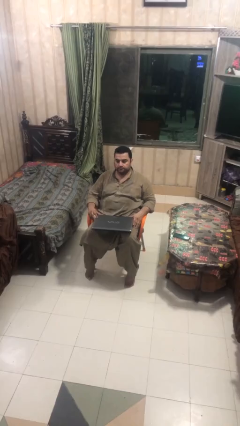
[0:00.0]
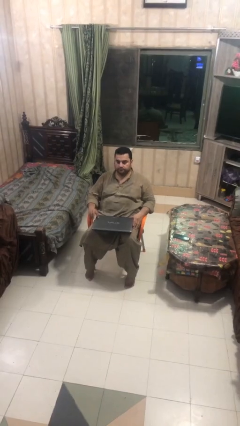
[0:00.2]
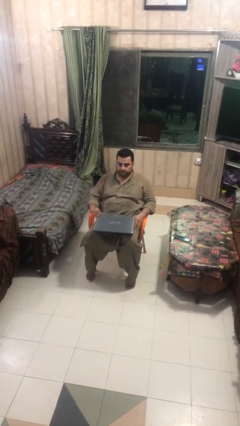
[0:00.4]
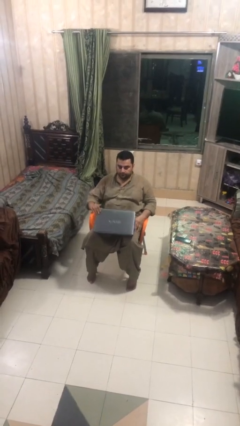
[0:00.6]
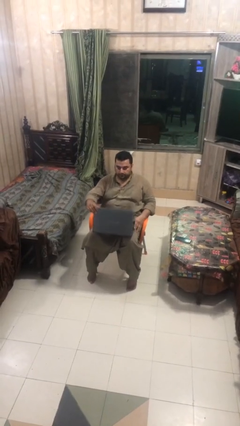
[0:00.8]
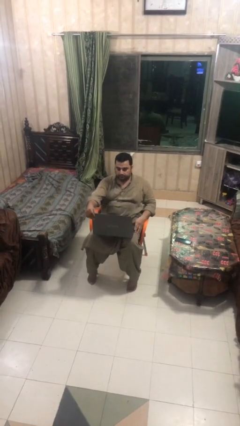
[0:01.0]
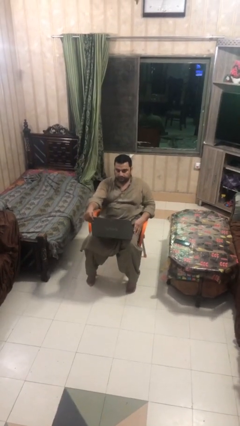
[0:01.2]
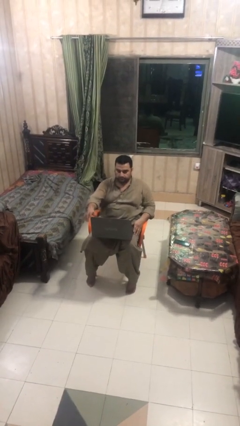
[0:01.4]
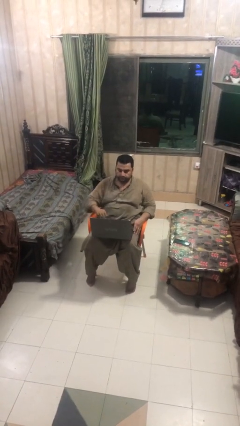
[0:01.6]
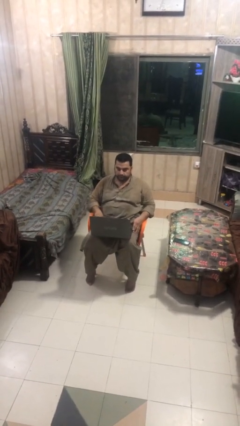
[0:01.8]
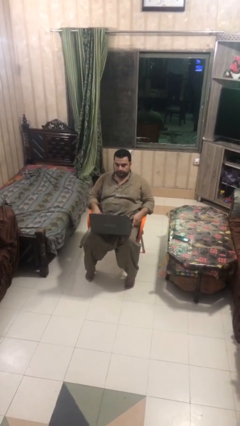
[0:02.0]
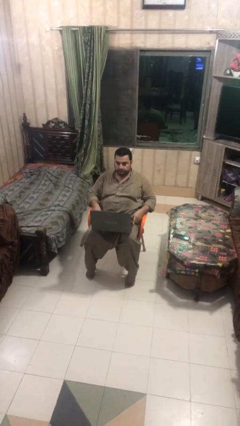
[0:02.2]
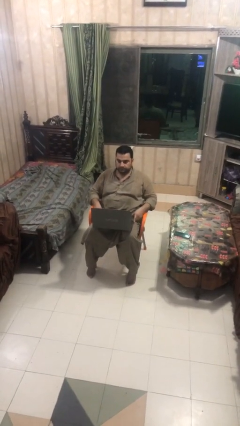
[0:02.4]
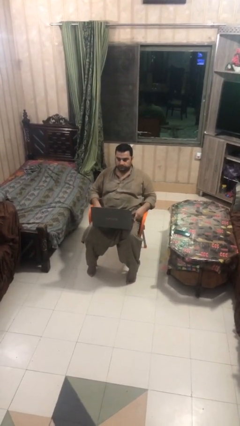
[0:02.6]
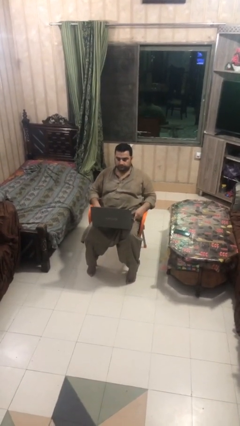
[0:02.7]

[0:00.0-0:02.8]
person opens laptop

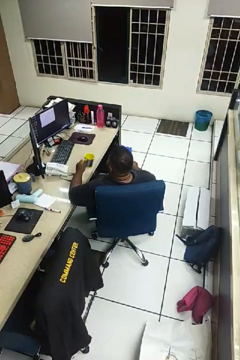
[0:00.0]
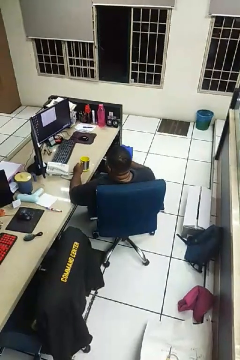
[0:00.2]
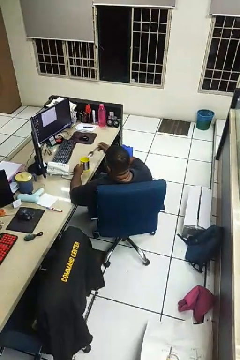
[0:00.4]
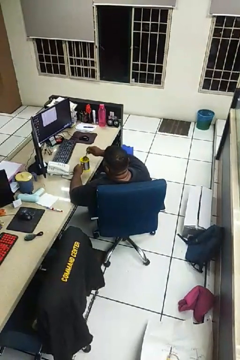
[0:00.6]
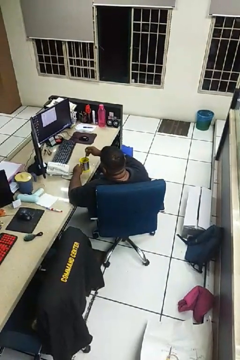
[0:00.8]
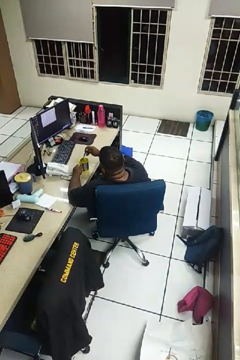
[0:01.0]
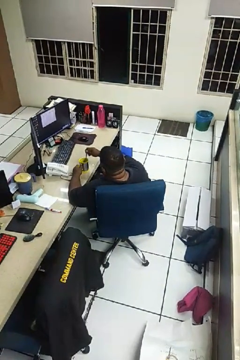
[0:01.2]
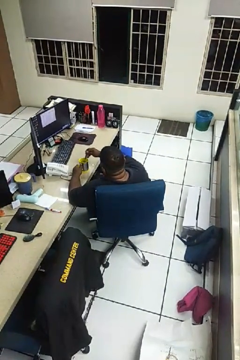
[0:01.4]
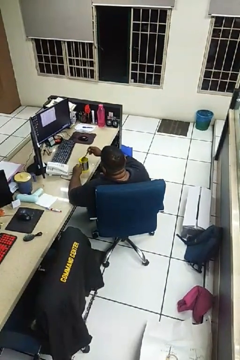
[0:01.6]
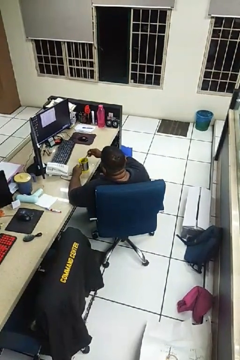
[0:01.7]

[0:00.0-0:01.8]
person stirs mug

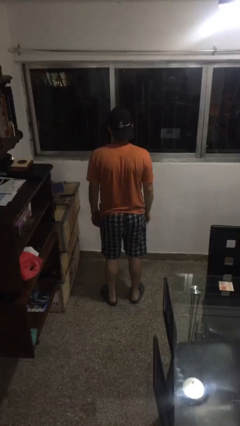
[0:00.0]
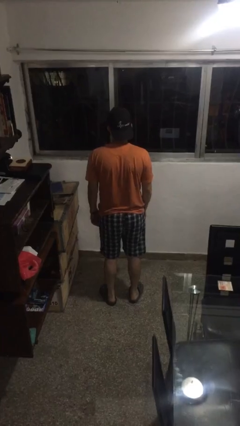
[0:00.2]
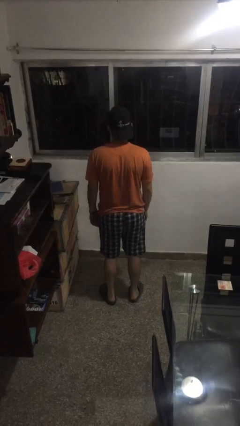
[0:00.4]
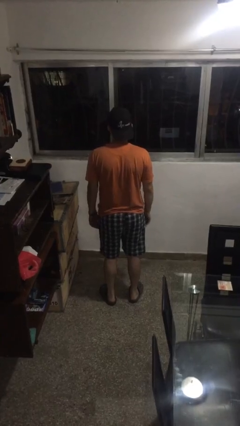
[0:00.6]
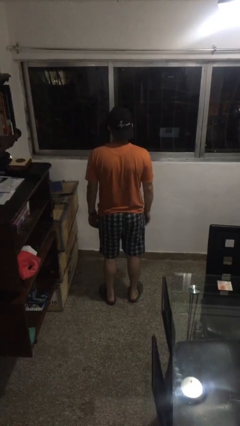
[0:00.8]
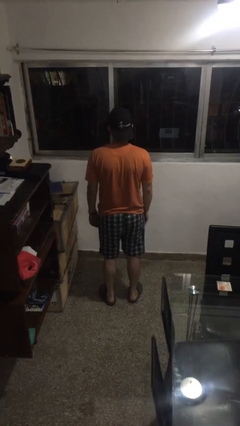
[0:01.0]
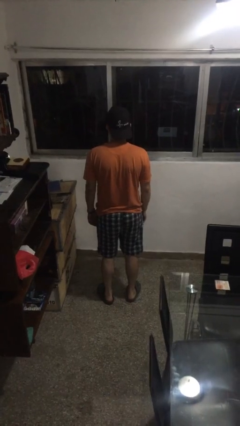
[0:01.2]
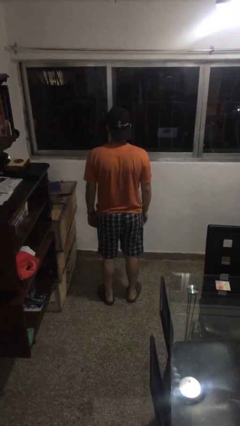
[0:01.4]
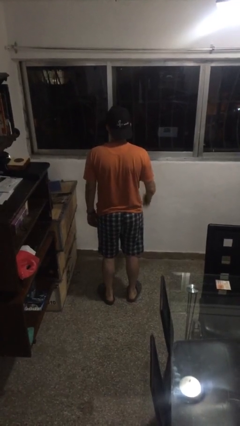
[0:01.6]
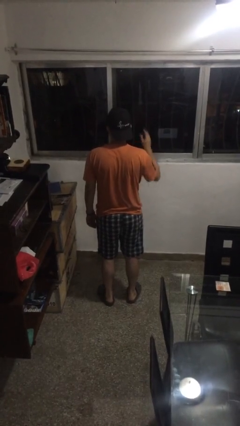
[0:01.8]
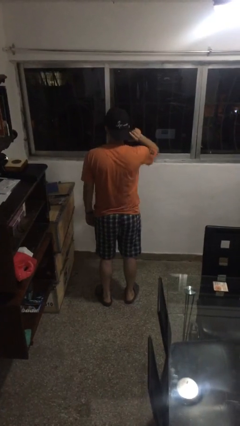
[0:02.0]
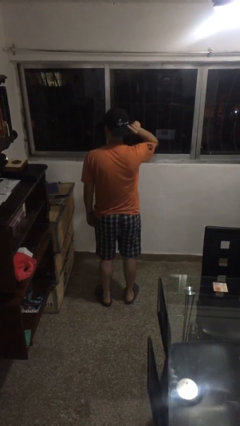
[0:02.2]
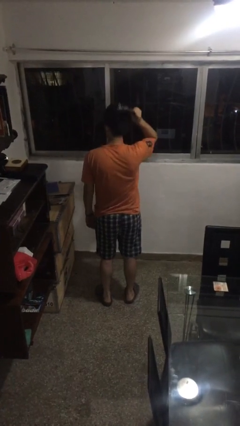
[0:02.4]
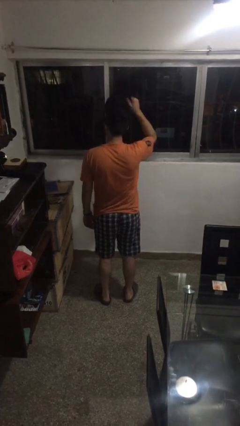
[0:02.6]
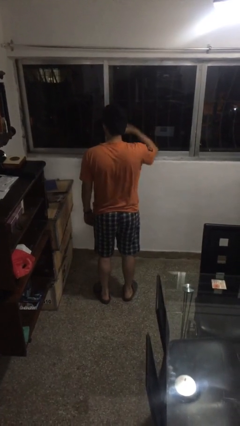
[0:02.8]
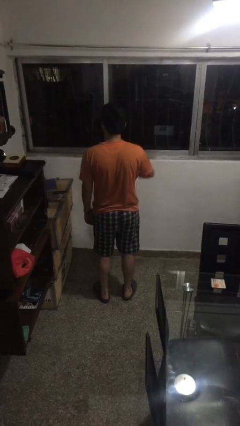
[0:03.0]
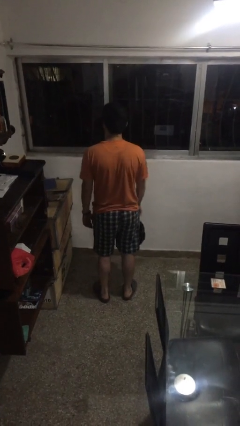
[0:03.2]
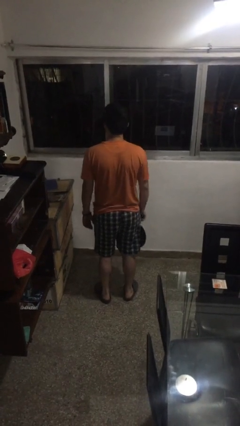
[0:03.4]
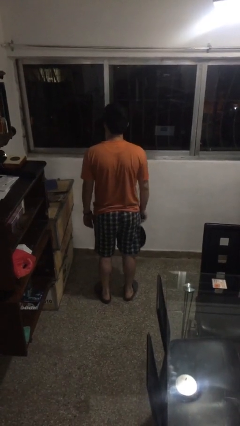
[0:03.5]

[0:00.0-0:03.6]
person takes off hat

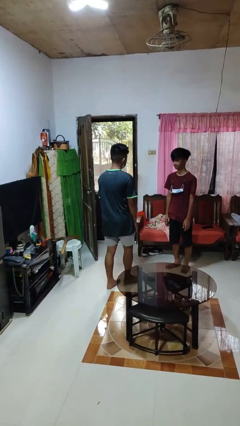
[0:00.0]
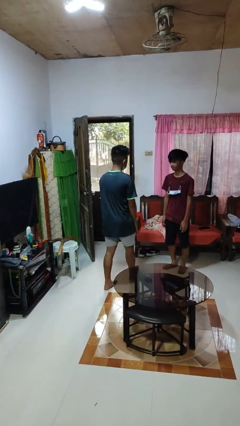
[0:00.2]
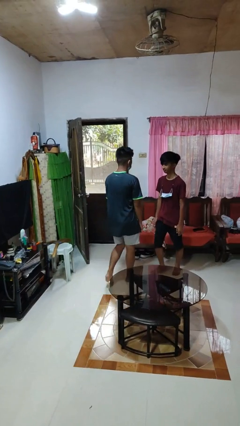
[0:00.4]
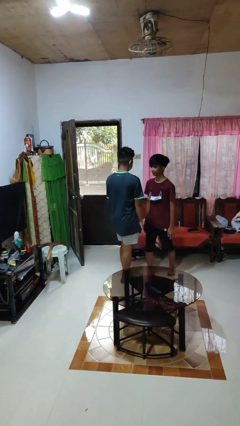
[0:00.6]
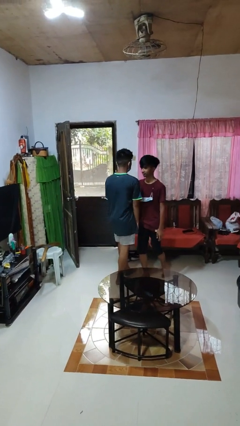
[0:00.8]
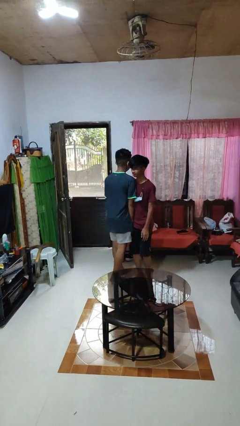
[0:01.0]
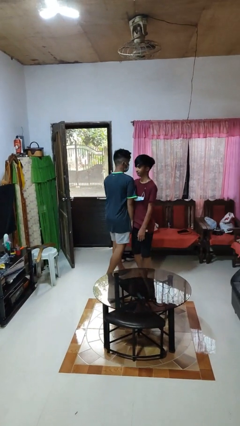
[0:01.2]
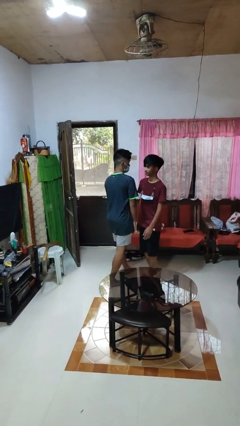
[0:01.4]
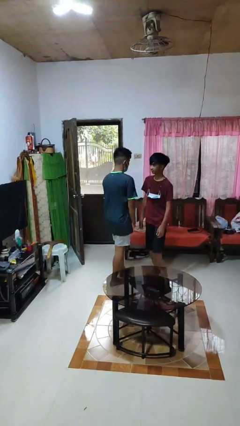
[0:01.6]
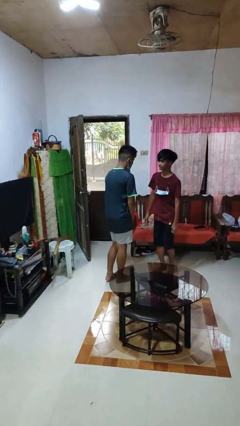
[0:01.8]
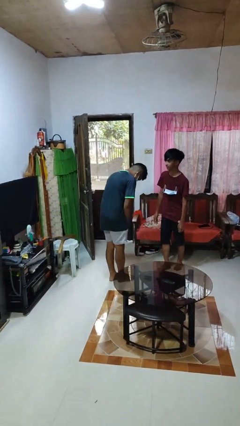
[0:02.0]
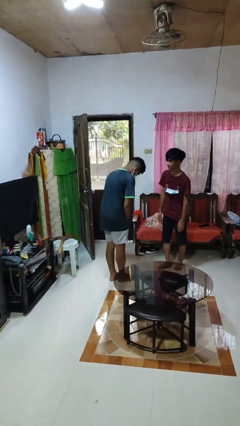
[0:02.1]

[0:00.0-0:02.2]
person bumps into person

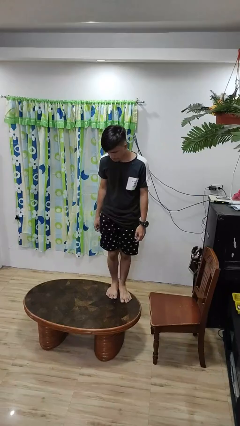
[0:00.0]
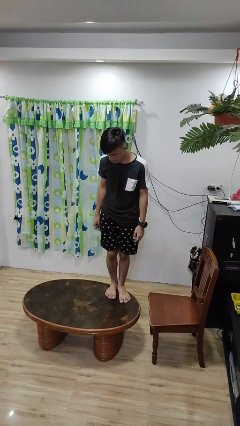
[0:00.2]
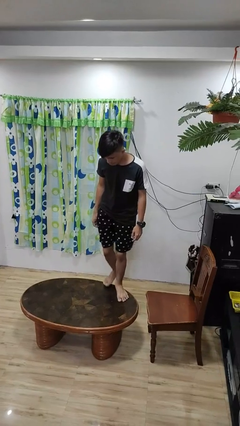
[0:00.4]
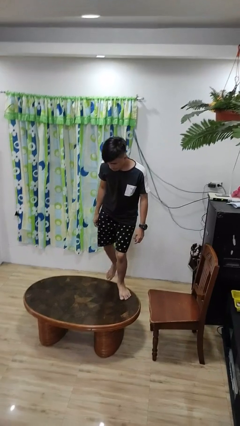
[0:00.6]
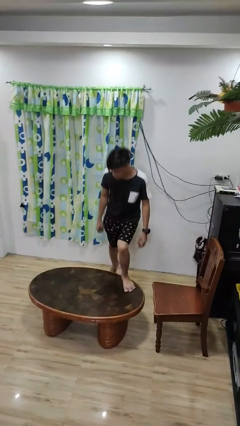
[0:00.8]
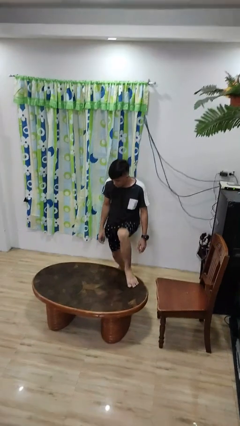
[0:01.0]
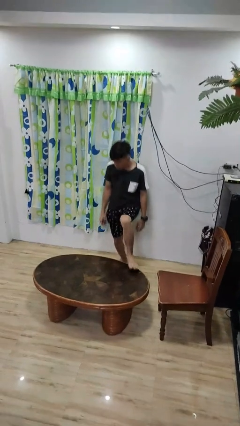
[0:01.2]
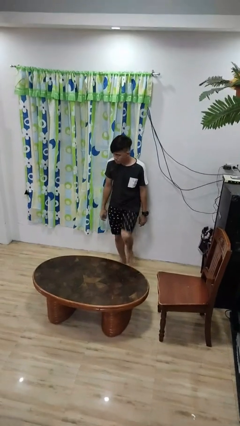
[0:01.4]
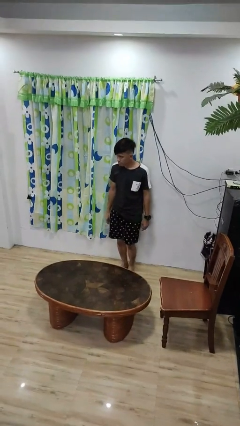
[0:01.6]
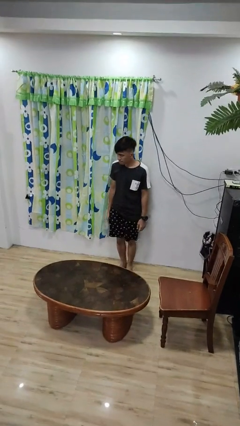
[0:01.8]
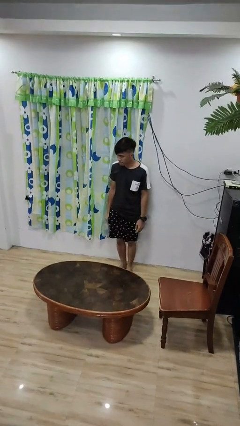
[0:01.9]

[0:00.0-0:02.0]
person climbs off table

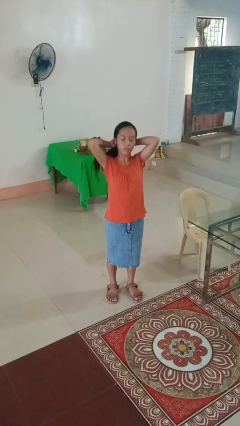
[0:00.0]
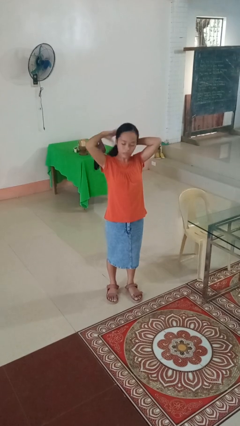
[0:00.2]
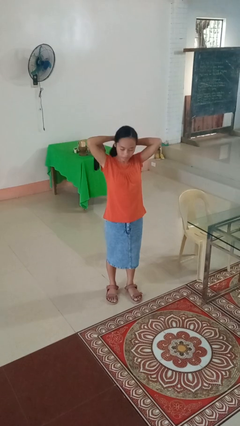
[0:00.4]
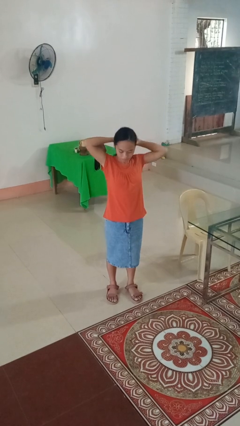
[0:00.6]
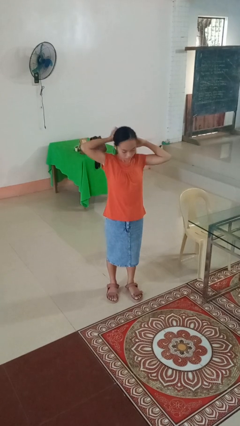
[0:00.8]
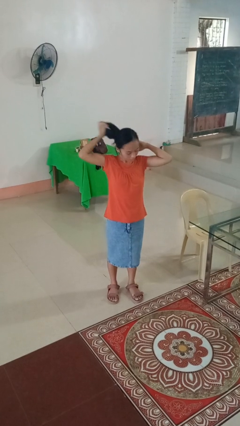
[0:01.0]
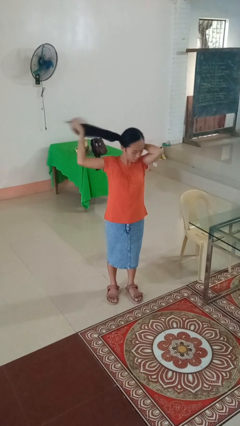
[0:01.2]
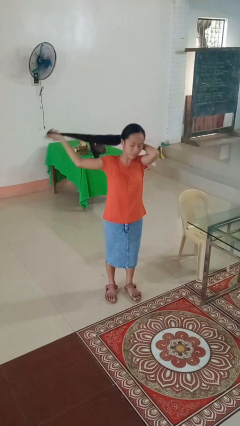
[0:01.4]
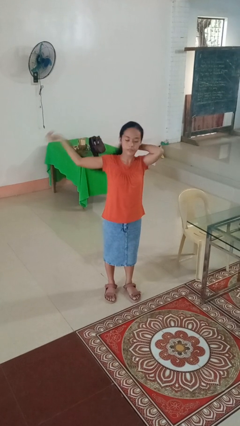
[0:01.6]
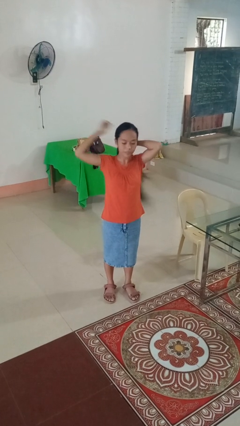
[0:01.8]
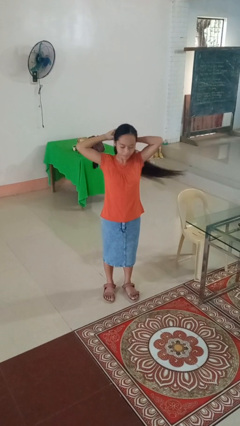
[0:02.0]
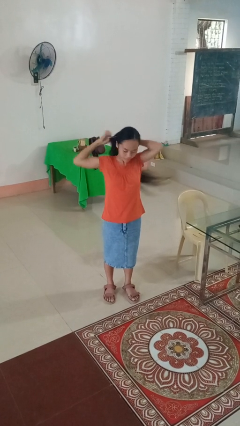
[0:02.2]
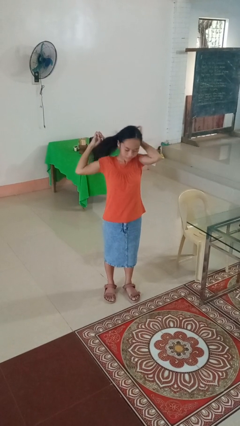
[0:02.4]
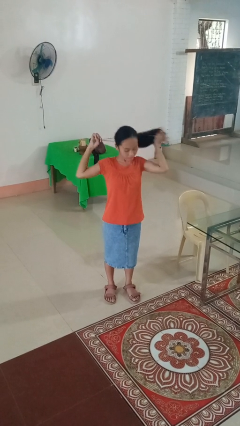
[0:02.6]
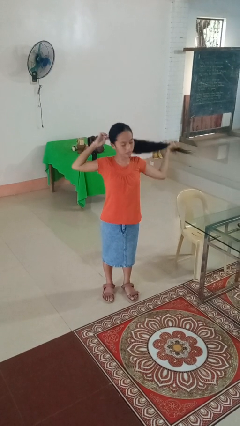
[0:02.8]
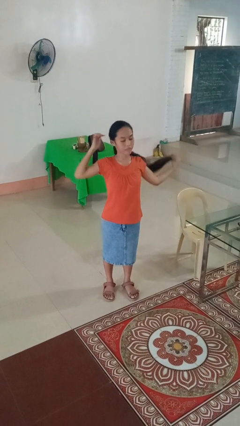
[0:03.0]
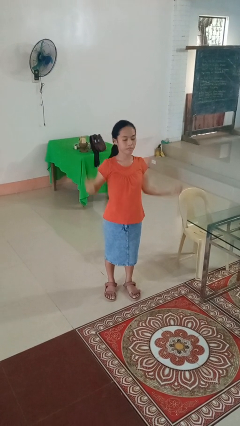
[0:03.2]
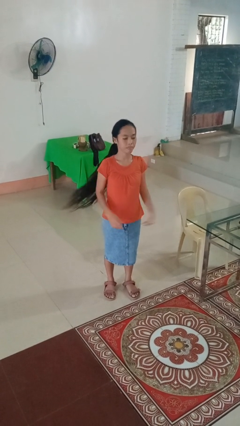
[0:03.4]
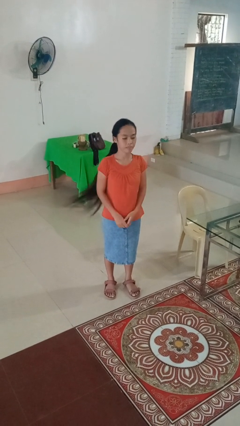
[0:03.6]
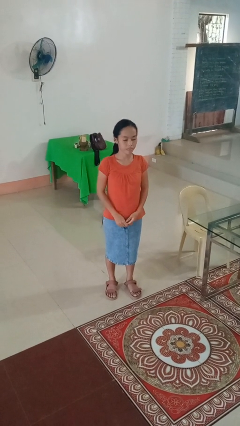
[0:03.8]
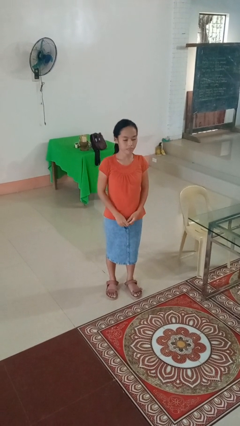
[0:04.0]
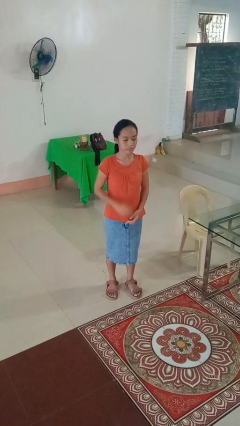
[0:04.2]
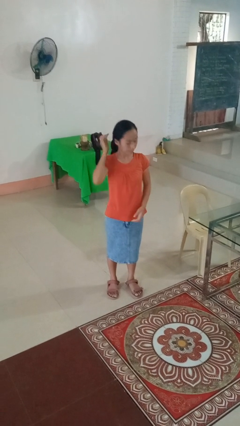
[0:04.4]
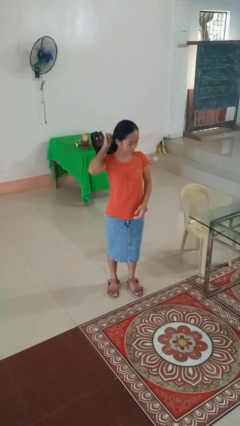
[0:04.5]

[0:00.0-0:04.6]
person puts hair in ponytail

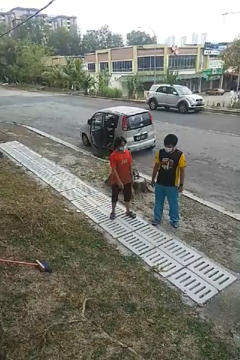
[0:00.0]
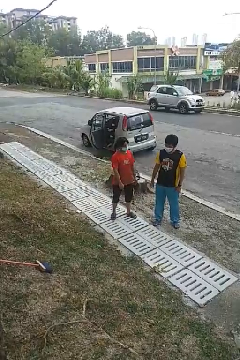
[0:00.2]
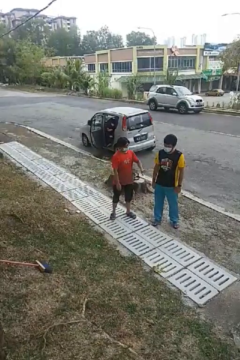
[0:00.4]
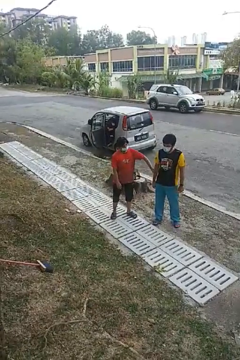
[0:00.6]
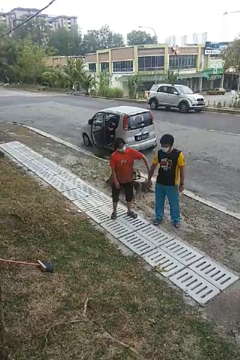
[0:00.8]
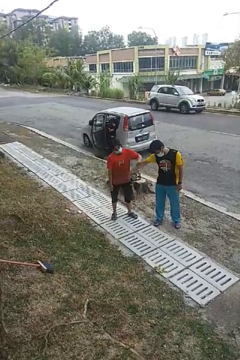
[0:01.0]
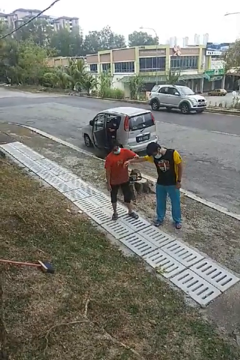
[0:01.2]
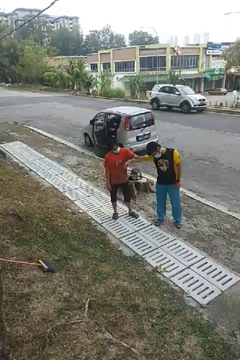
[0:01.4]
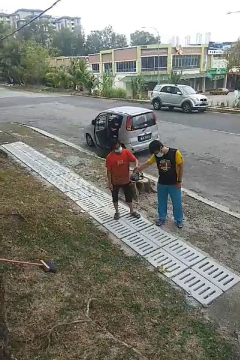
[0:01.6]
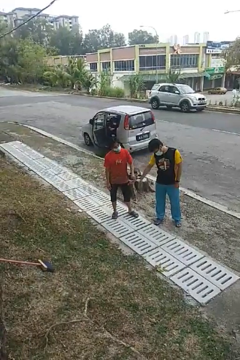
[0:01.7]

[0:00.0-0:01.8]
person grabs person by forearm
